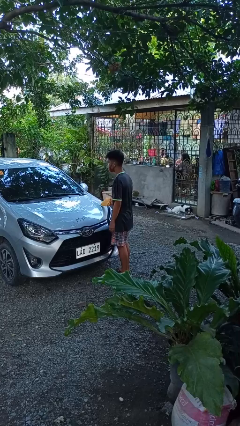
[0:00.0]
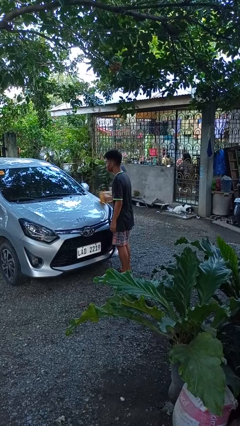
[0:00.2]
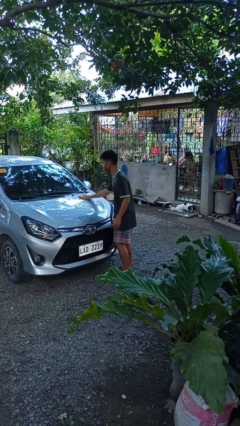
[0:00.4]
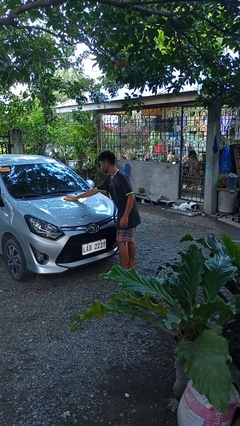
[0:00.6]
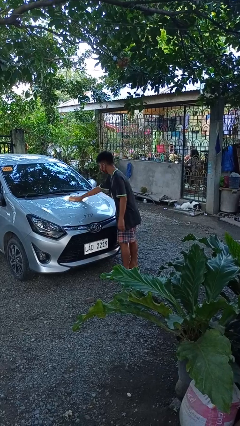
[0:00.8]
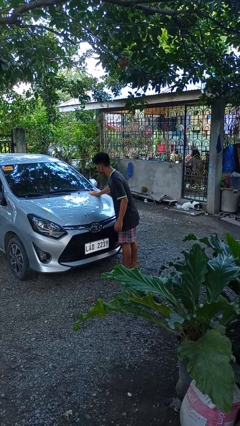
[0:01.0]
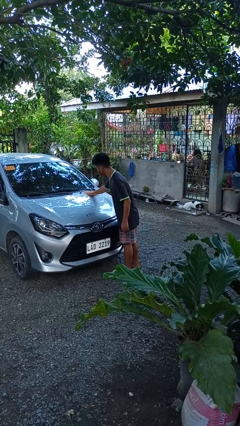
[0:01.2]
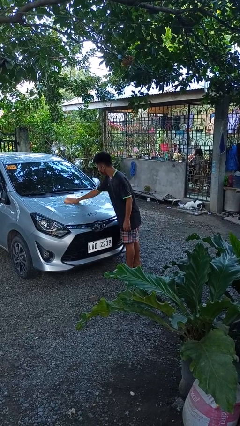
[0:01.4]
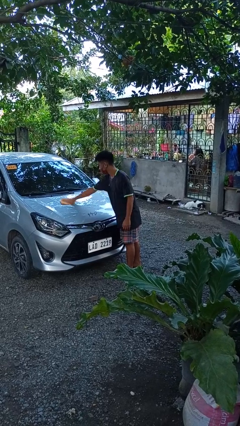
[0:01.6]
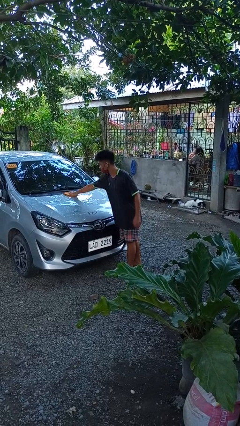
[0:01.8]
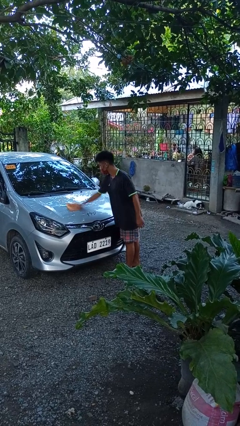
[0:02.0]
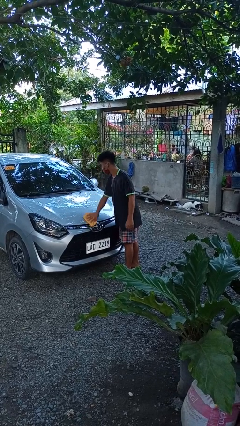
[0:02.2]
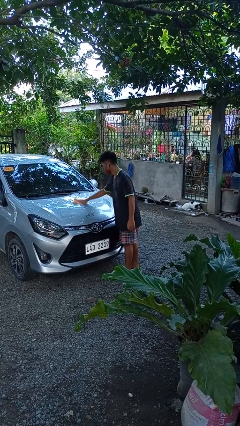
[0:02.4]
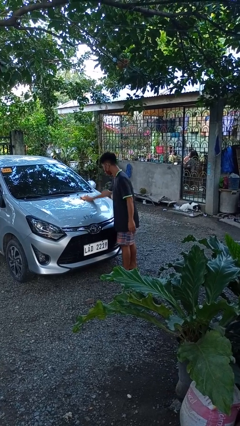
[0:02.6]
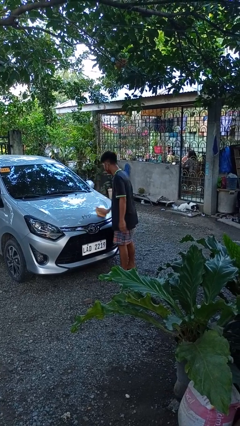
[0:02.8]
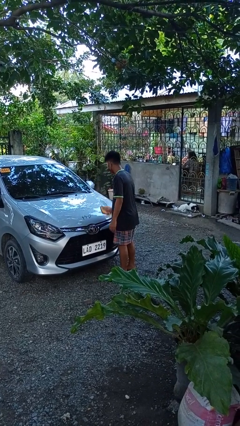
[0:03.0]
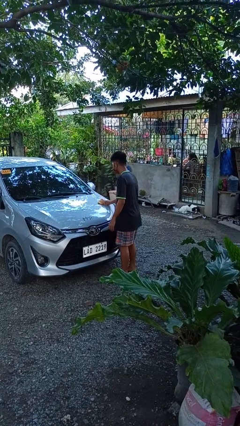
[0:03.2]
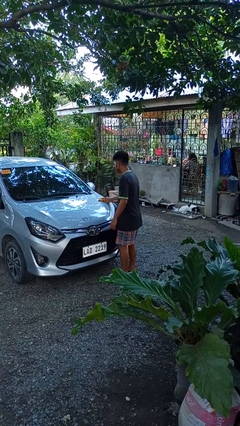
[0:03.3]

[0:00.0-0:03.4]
person polishes car with rag

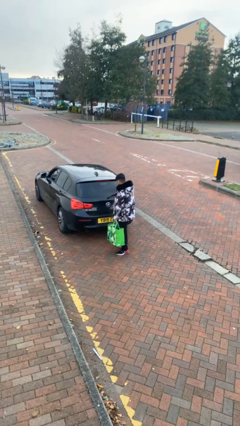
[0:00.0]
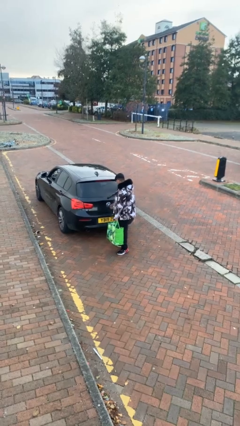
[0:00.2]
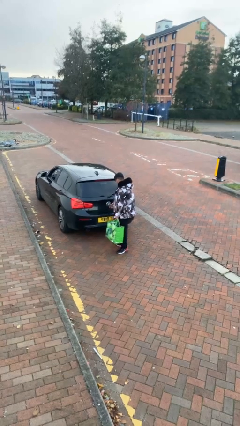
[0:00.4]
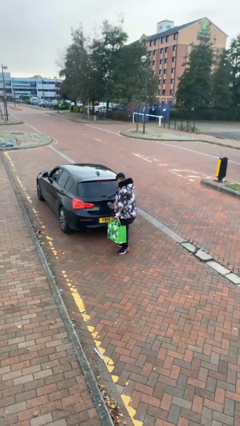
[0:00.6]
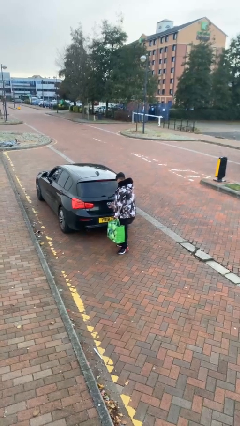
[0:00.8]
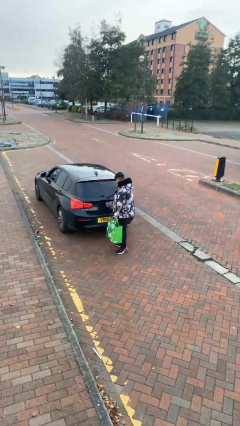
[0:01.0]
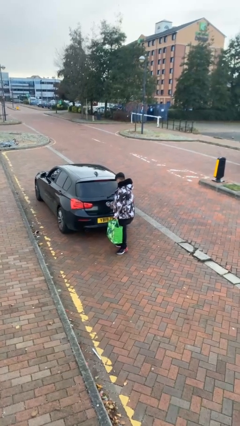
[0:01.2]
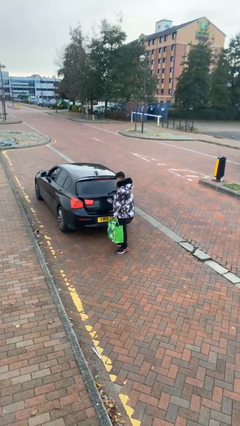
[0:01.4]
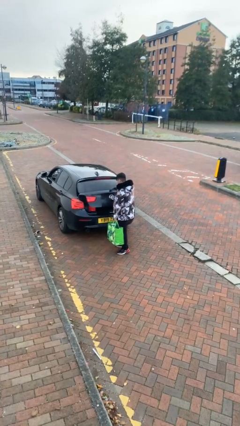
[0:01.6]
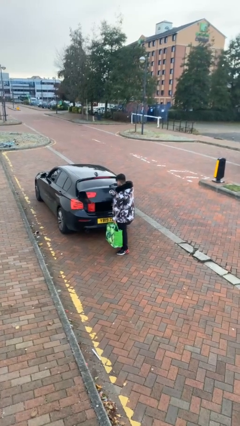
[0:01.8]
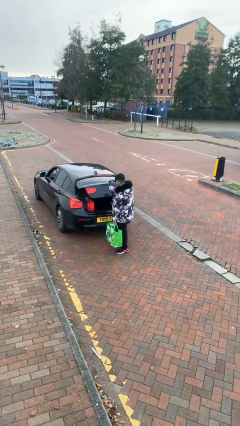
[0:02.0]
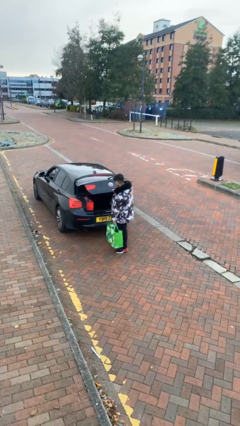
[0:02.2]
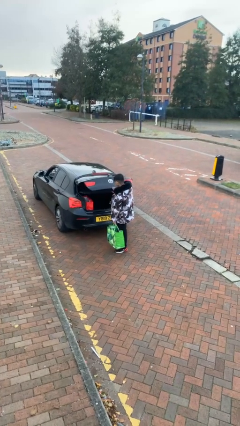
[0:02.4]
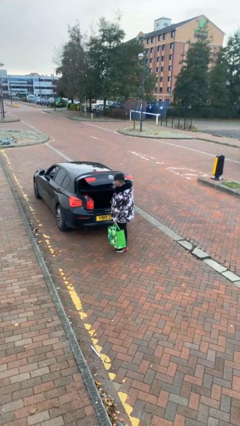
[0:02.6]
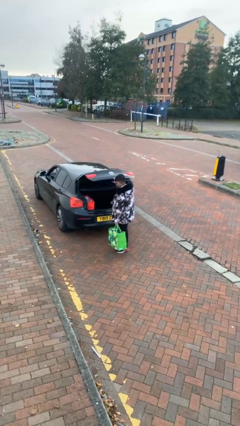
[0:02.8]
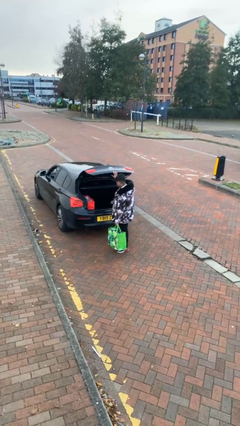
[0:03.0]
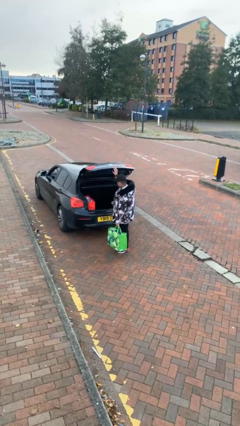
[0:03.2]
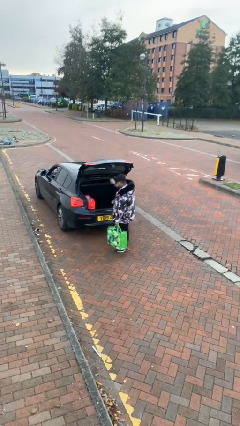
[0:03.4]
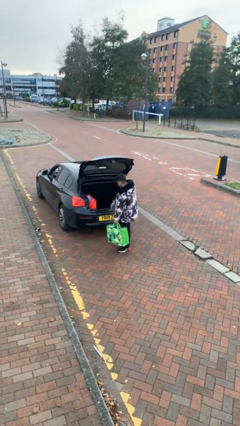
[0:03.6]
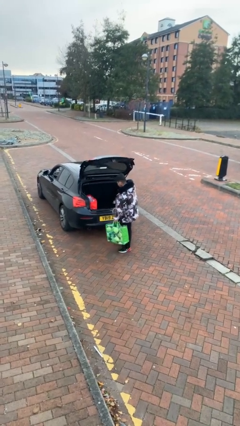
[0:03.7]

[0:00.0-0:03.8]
person opens car trunk

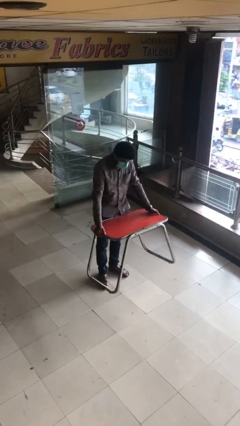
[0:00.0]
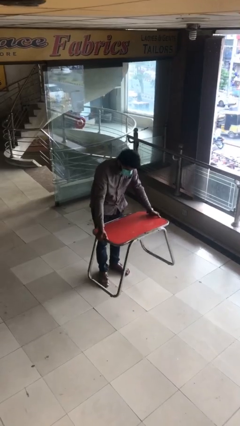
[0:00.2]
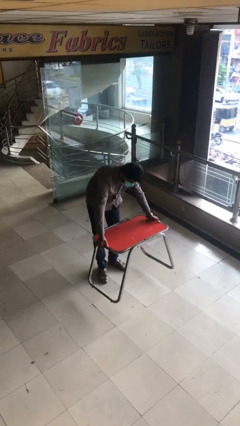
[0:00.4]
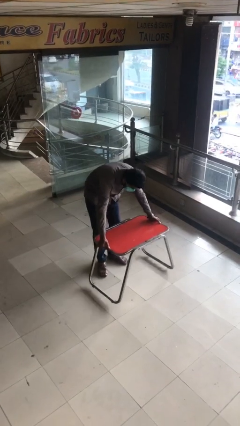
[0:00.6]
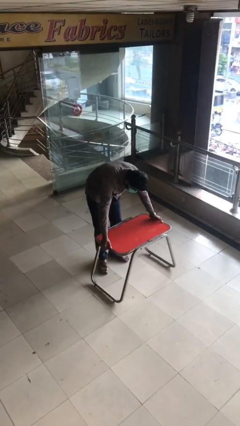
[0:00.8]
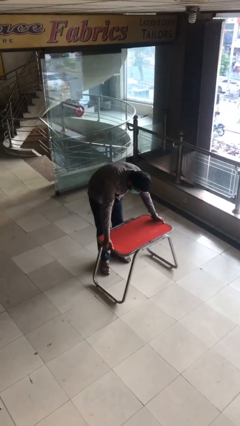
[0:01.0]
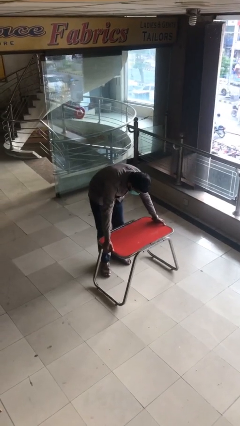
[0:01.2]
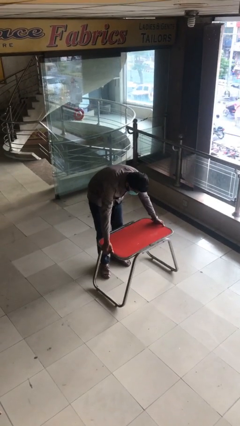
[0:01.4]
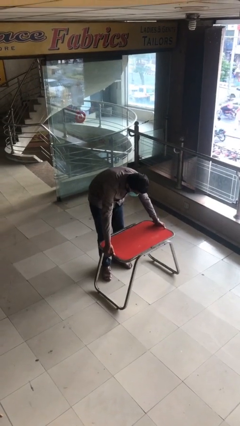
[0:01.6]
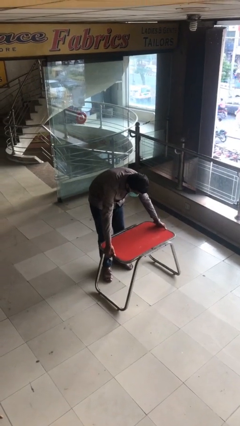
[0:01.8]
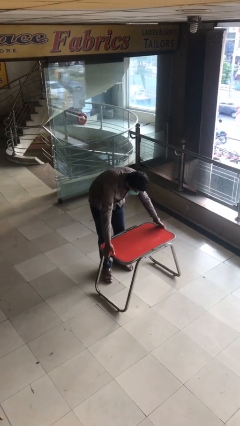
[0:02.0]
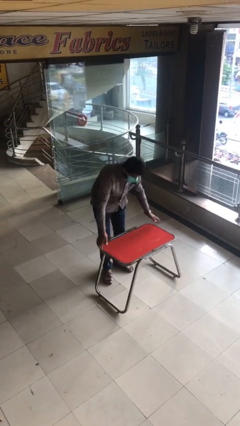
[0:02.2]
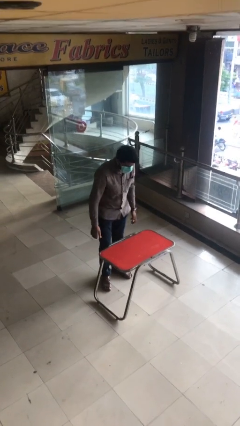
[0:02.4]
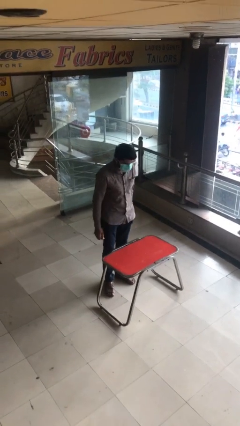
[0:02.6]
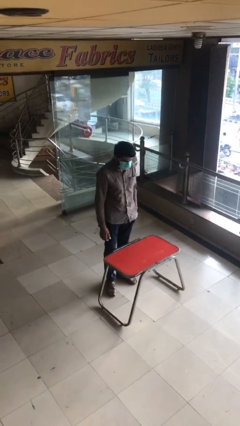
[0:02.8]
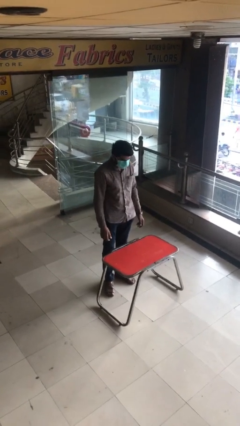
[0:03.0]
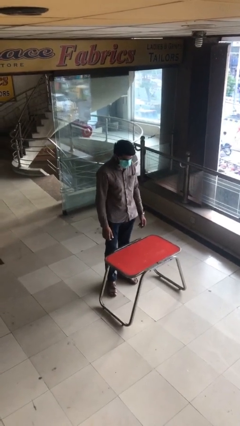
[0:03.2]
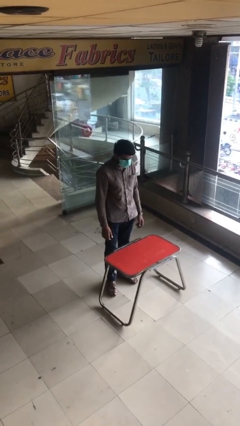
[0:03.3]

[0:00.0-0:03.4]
person puts down object on floor

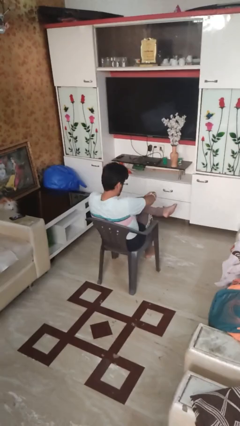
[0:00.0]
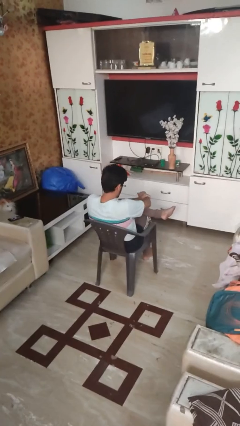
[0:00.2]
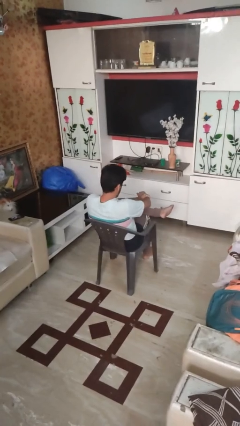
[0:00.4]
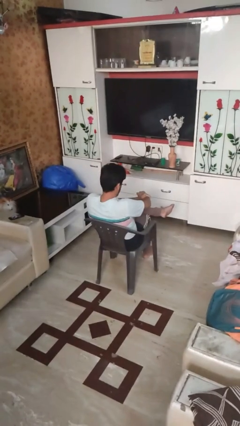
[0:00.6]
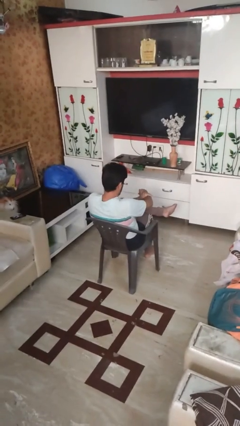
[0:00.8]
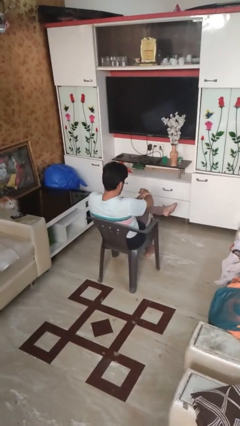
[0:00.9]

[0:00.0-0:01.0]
person swats bug

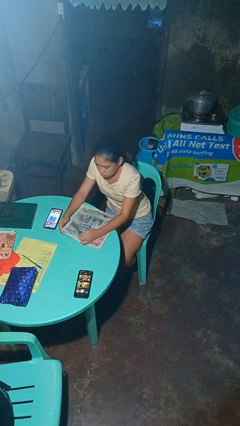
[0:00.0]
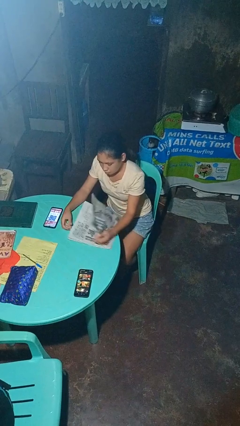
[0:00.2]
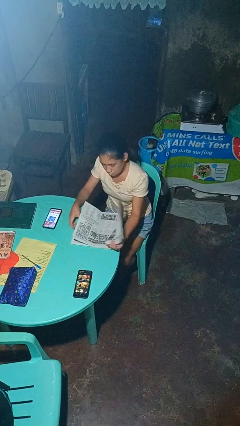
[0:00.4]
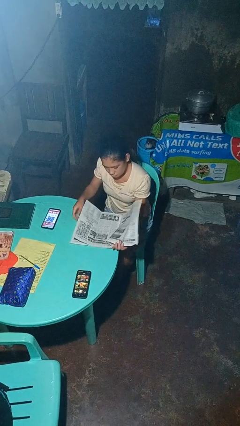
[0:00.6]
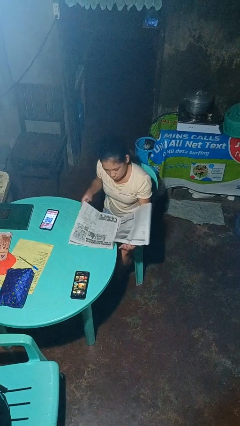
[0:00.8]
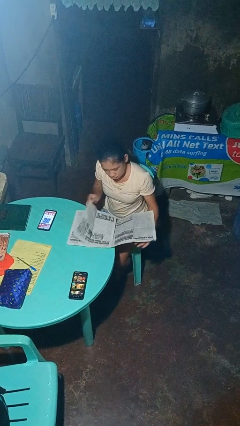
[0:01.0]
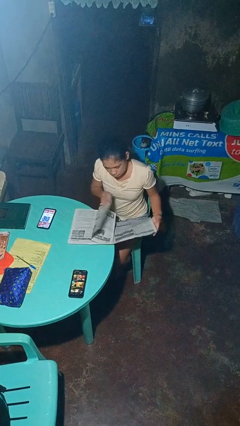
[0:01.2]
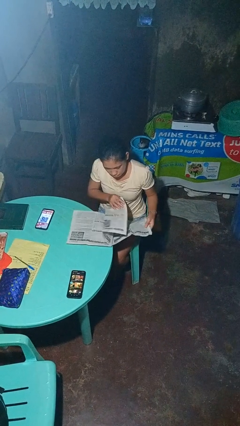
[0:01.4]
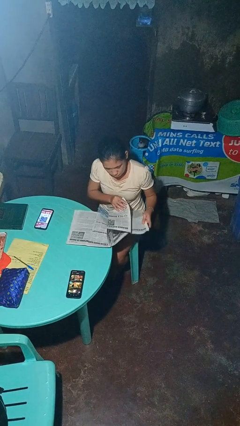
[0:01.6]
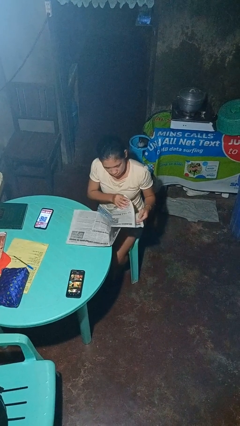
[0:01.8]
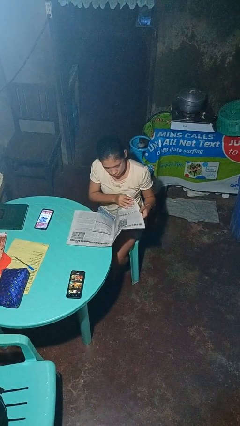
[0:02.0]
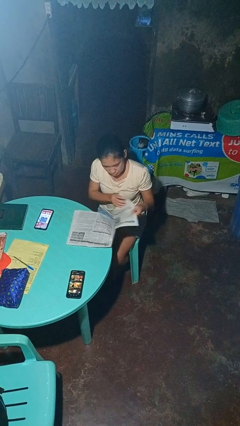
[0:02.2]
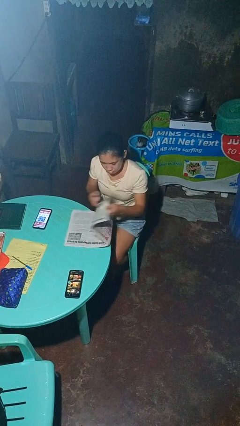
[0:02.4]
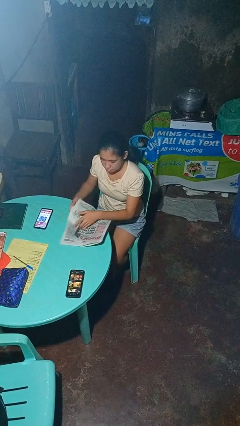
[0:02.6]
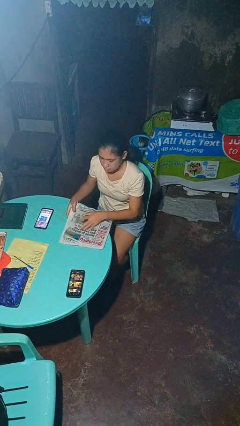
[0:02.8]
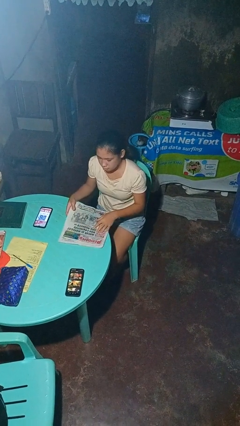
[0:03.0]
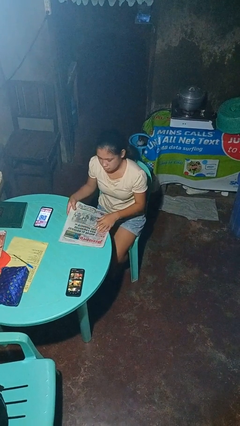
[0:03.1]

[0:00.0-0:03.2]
person reads newspaper

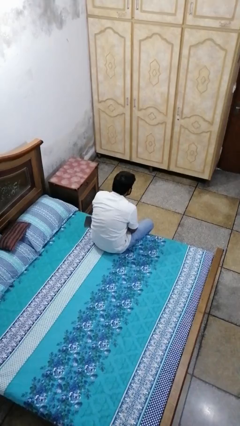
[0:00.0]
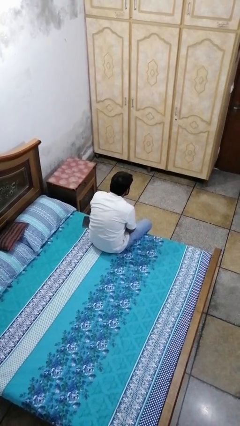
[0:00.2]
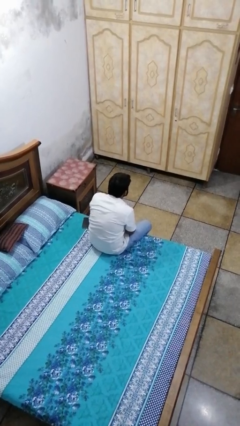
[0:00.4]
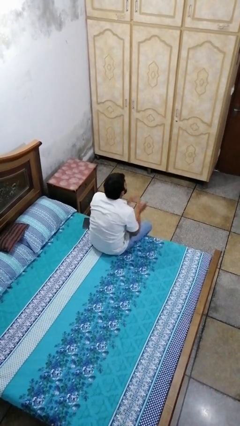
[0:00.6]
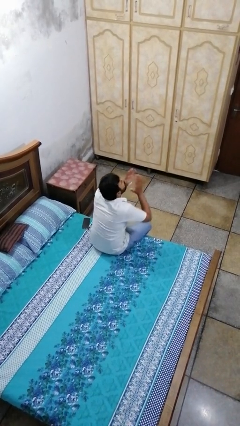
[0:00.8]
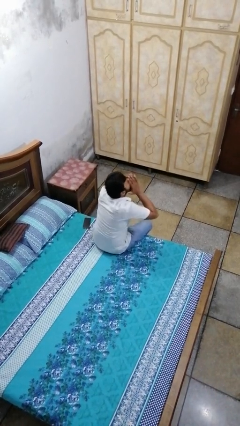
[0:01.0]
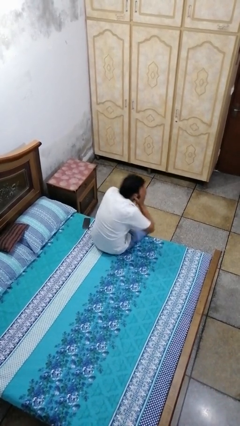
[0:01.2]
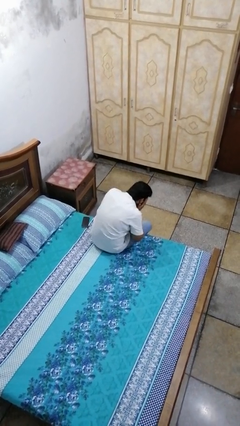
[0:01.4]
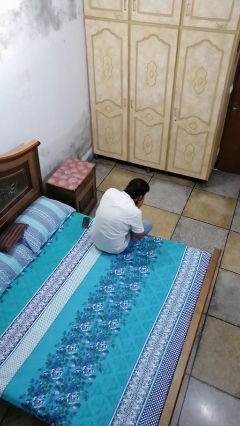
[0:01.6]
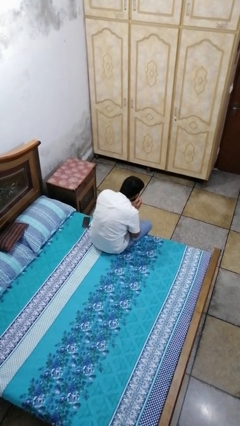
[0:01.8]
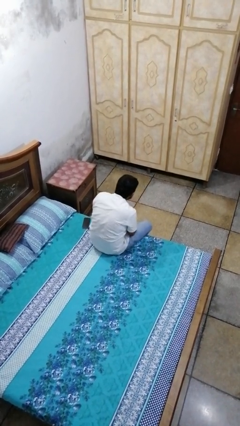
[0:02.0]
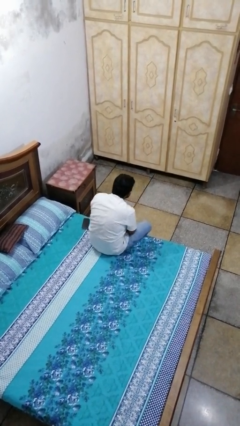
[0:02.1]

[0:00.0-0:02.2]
person sneezes into hand

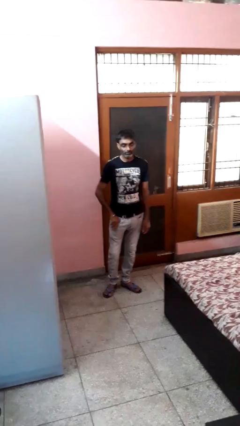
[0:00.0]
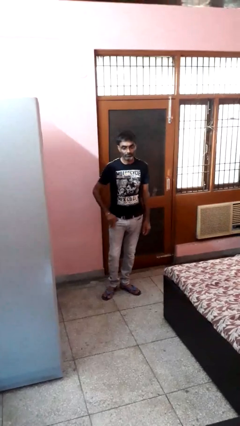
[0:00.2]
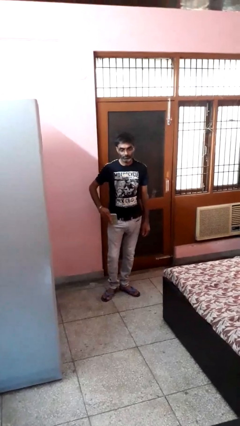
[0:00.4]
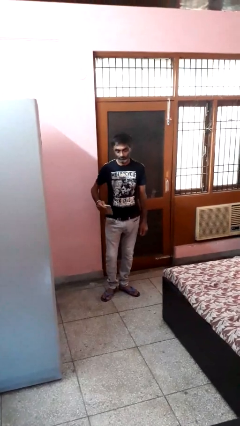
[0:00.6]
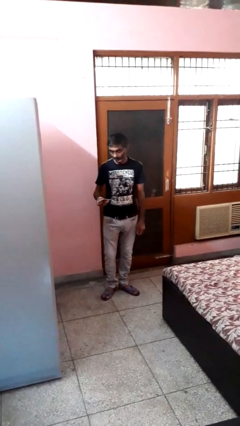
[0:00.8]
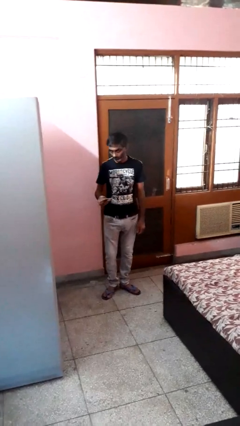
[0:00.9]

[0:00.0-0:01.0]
person takes phone from pocket
